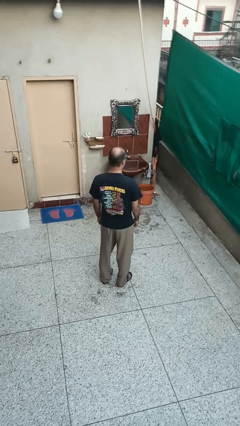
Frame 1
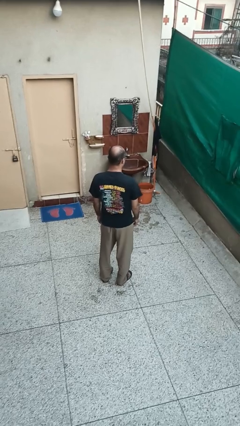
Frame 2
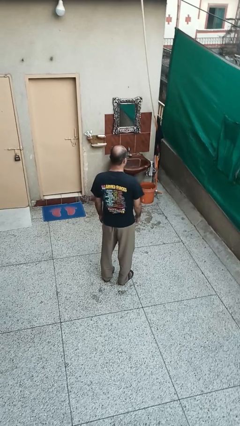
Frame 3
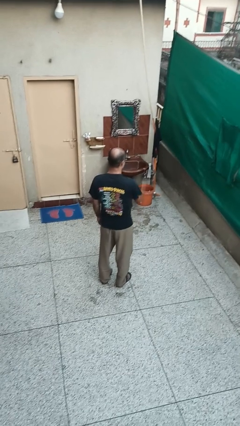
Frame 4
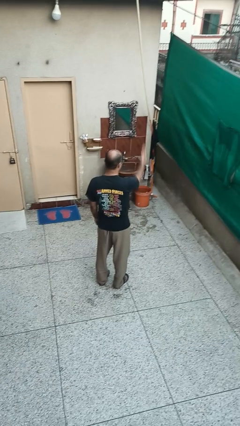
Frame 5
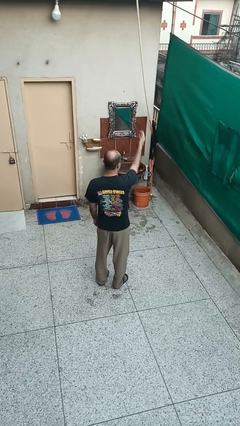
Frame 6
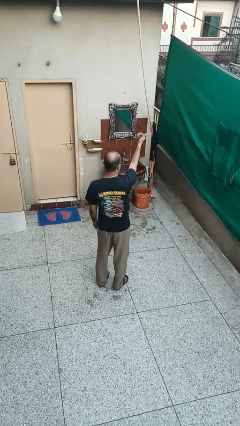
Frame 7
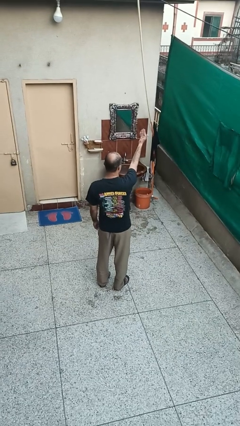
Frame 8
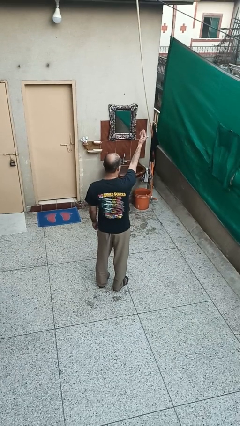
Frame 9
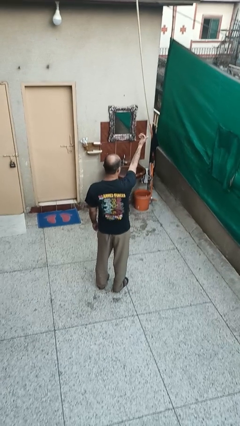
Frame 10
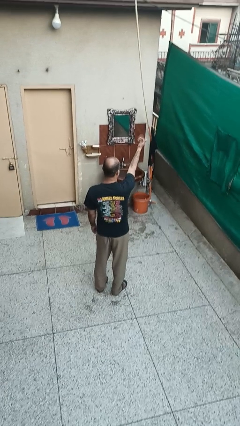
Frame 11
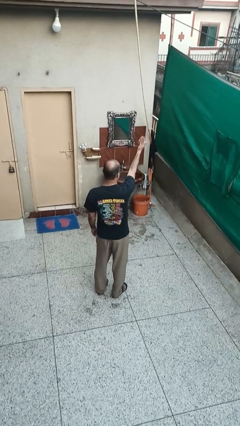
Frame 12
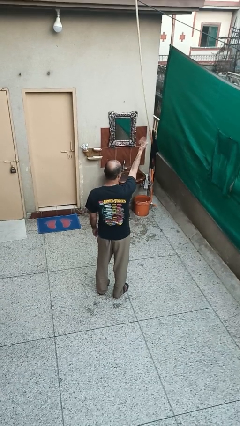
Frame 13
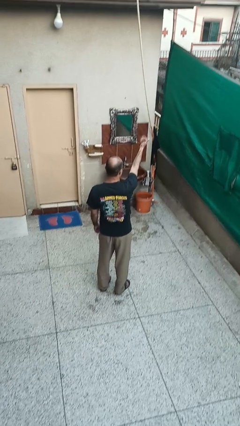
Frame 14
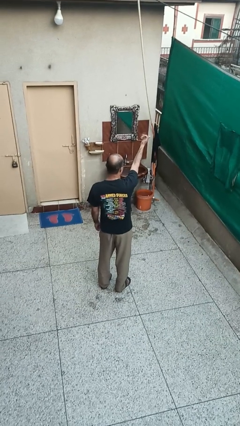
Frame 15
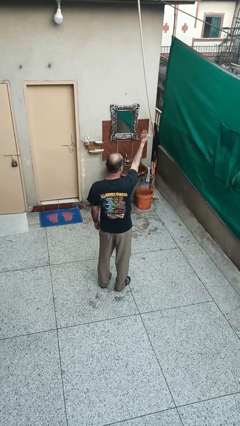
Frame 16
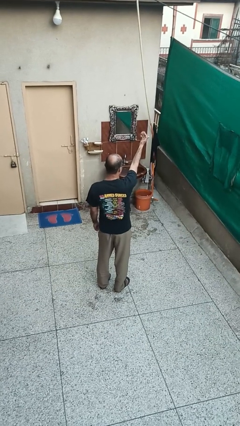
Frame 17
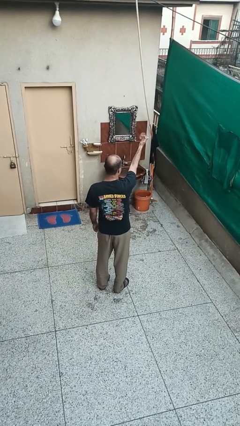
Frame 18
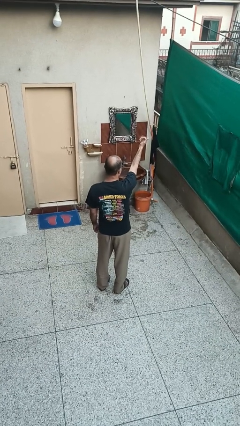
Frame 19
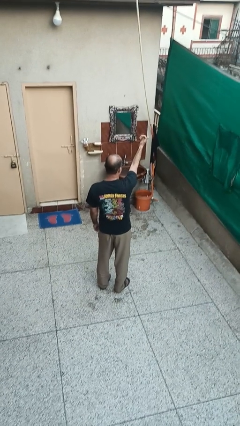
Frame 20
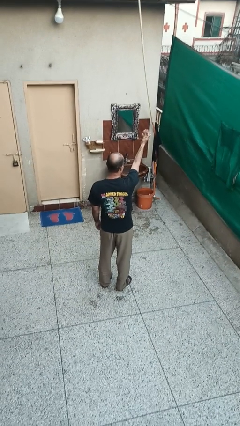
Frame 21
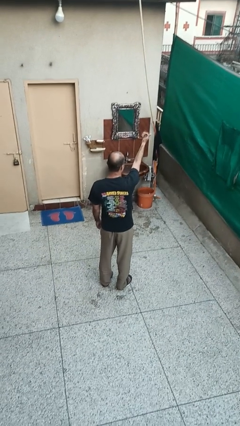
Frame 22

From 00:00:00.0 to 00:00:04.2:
person gestures come here

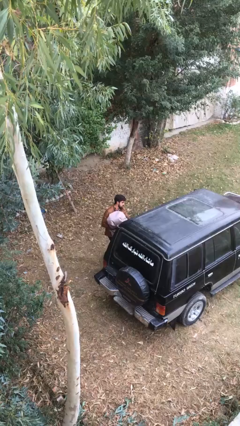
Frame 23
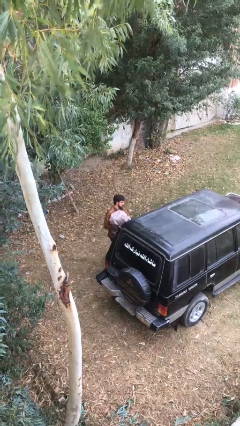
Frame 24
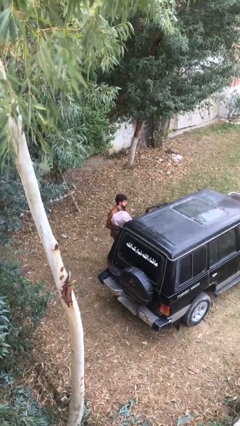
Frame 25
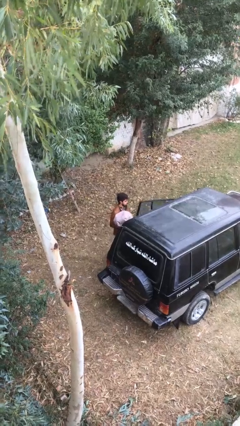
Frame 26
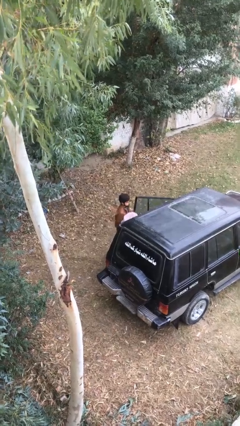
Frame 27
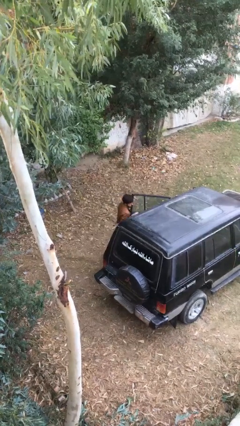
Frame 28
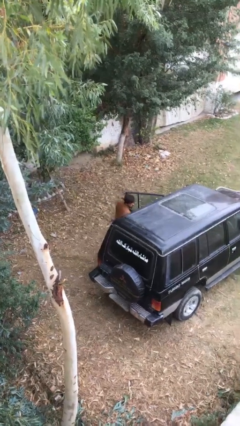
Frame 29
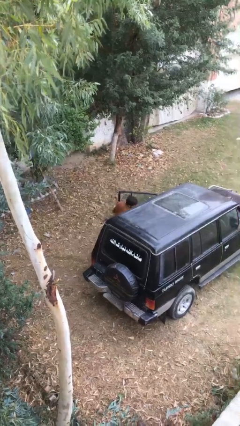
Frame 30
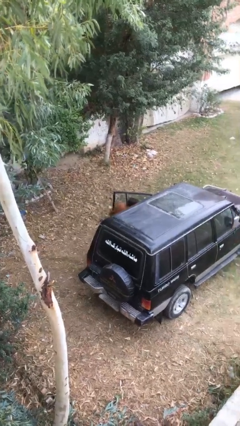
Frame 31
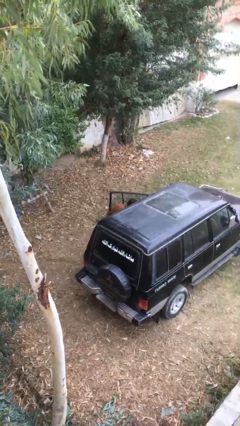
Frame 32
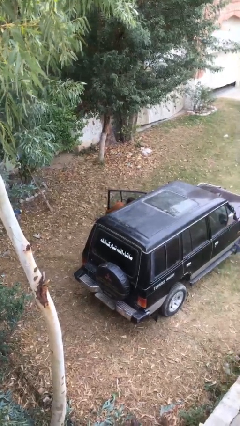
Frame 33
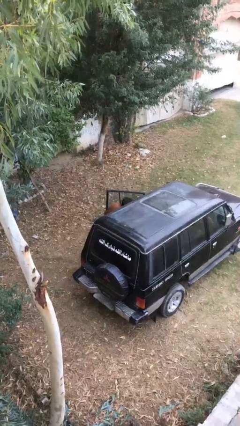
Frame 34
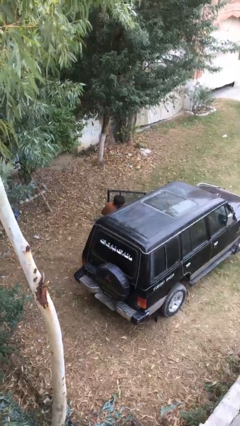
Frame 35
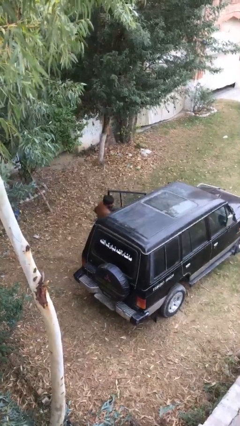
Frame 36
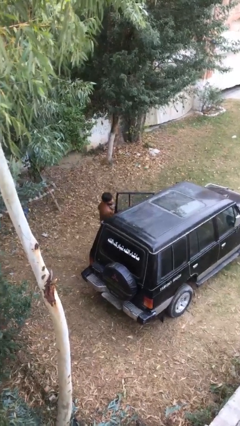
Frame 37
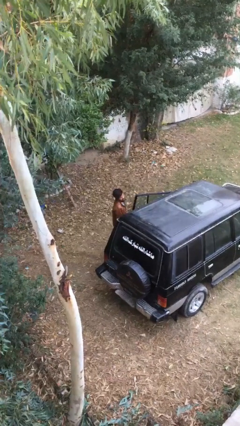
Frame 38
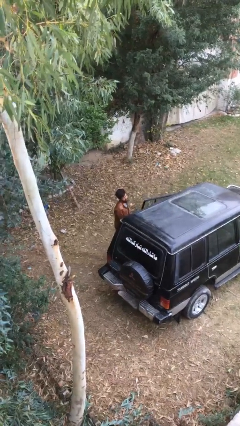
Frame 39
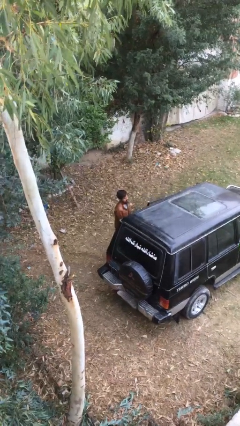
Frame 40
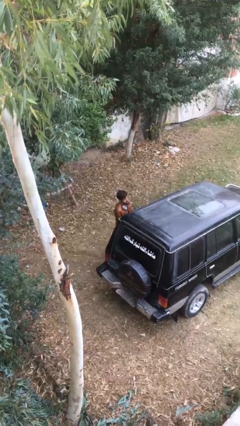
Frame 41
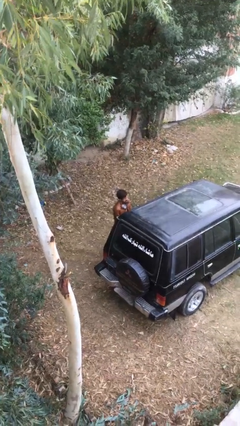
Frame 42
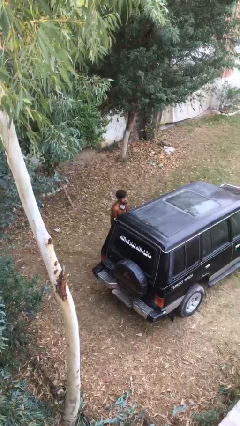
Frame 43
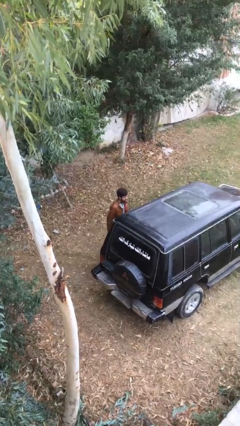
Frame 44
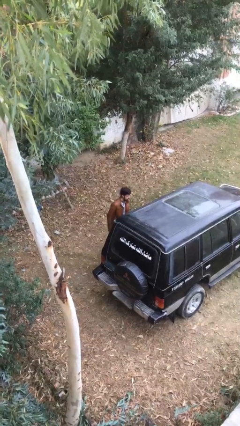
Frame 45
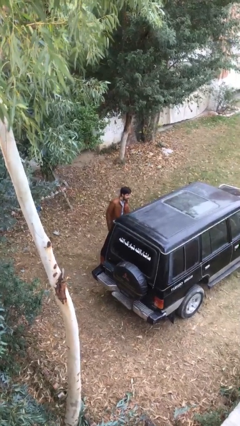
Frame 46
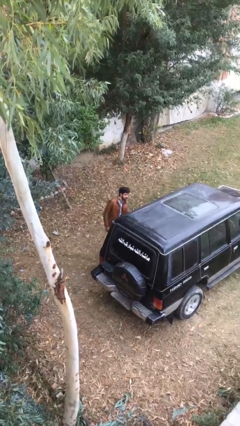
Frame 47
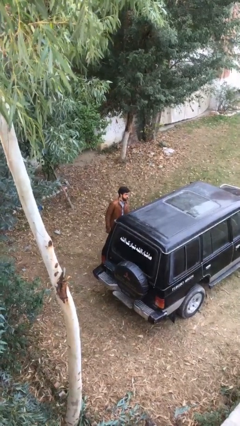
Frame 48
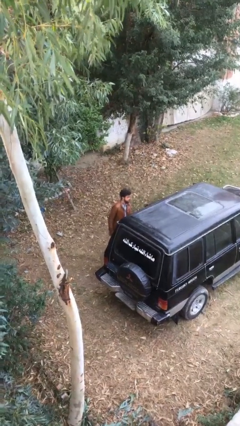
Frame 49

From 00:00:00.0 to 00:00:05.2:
person loads car

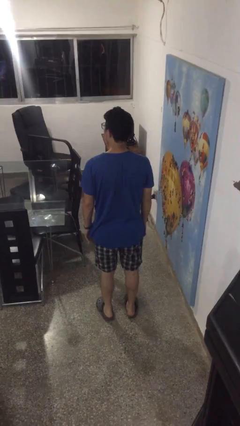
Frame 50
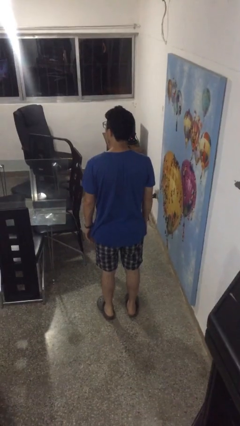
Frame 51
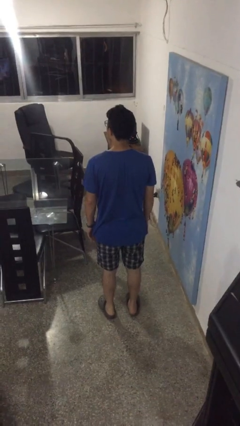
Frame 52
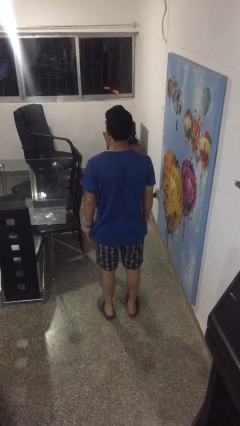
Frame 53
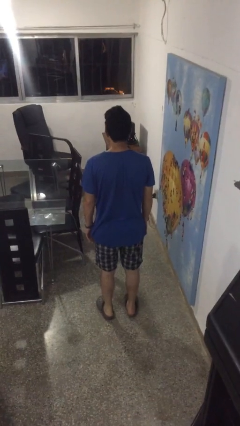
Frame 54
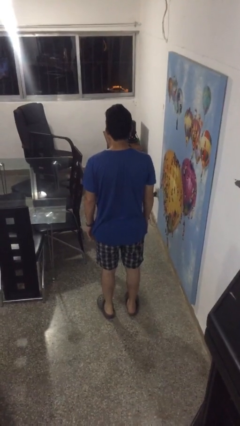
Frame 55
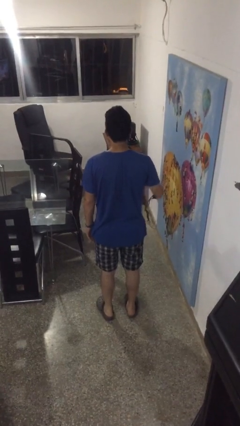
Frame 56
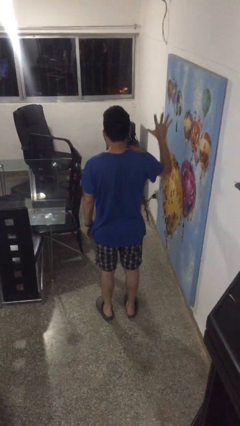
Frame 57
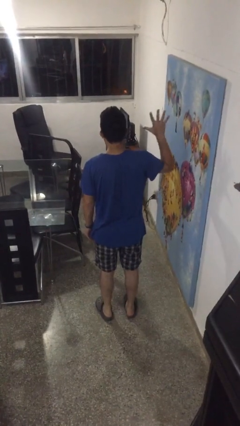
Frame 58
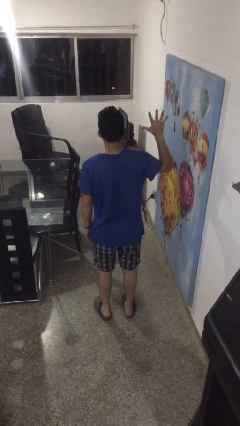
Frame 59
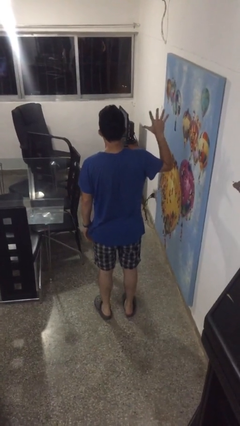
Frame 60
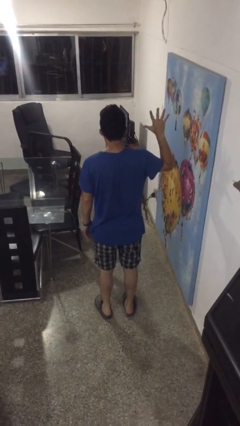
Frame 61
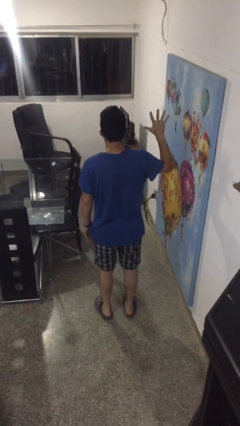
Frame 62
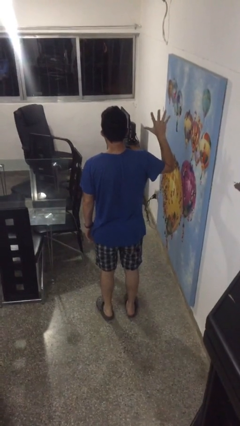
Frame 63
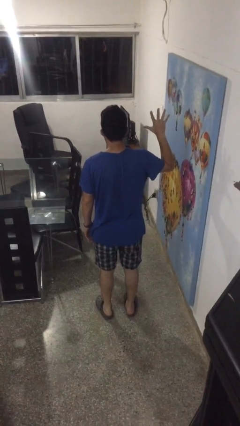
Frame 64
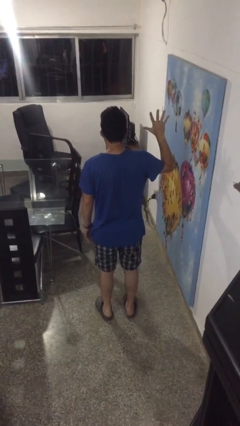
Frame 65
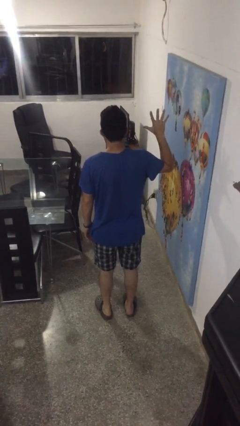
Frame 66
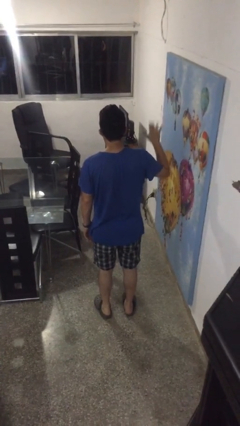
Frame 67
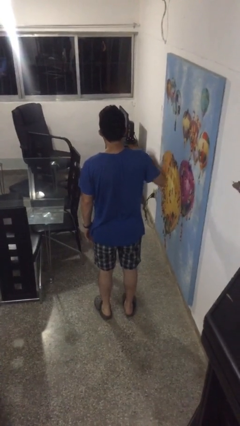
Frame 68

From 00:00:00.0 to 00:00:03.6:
person gestures number five

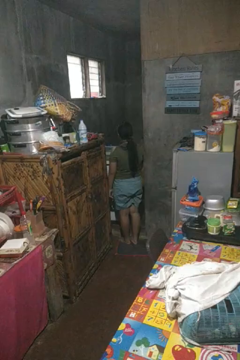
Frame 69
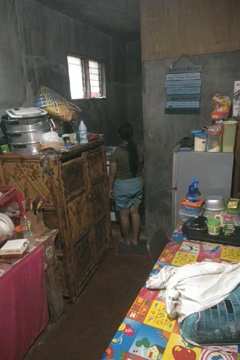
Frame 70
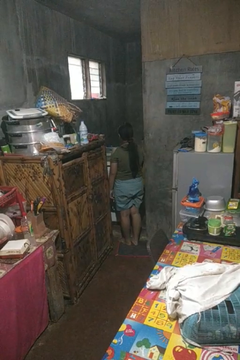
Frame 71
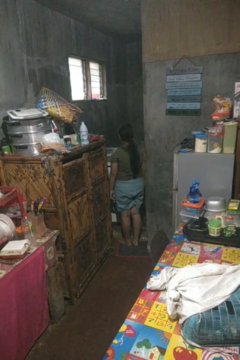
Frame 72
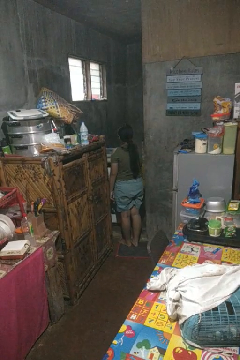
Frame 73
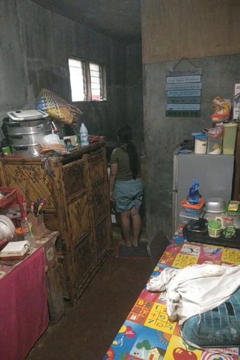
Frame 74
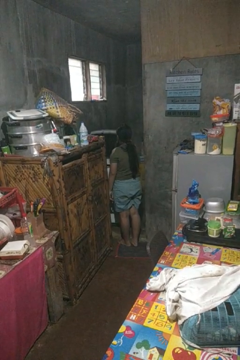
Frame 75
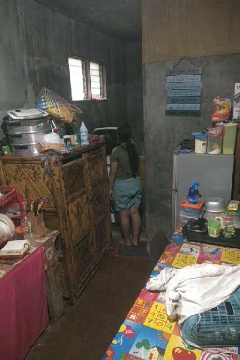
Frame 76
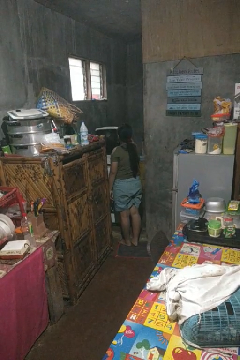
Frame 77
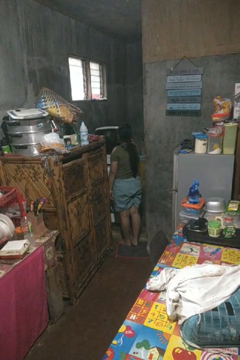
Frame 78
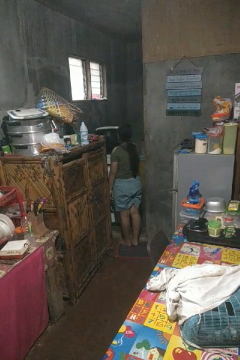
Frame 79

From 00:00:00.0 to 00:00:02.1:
person opens clothes washer

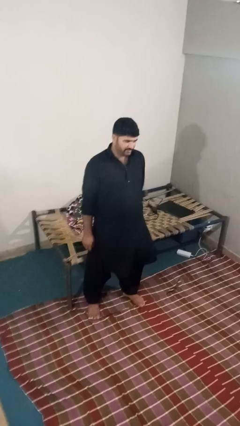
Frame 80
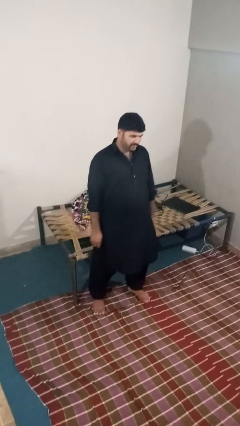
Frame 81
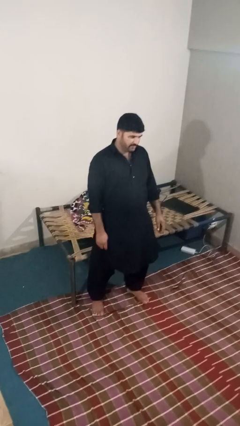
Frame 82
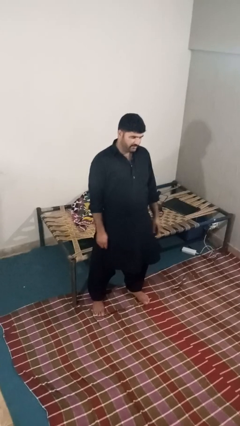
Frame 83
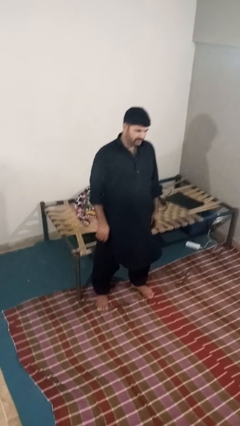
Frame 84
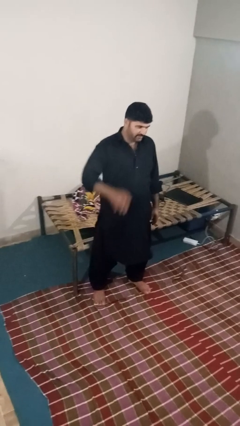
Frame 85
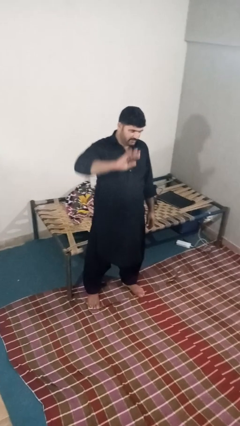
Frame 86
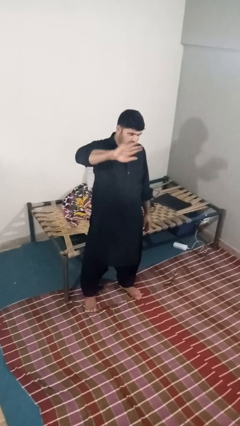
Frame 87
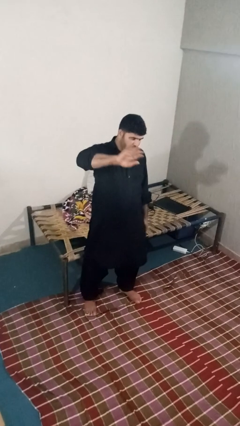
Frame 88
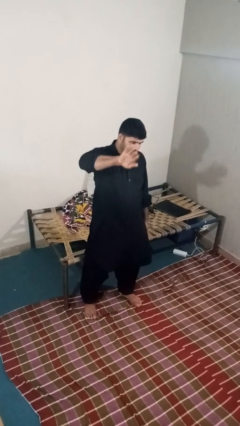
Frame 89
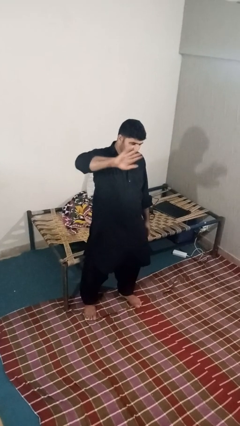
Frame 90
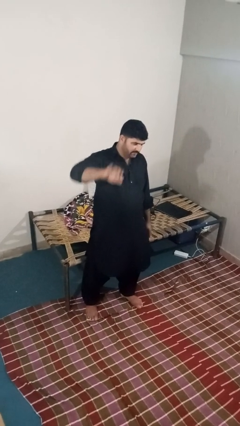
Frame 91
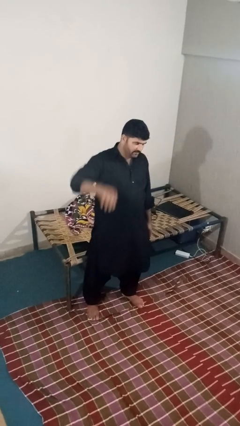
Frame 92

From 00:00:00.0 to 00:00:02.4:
person gestures swipe right

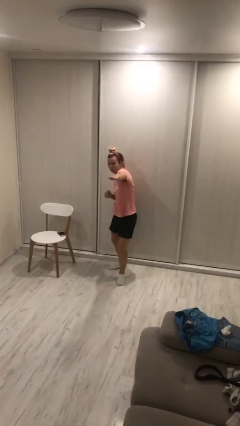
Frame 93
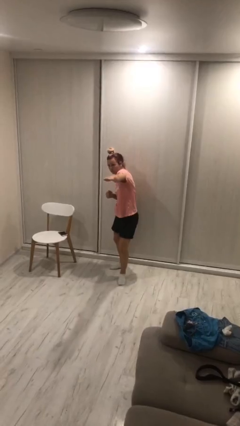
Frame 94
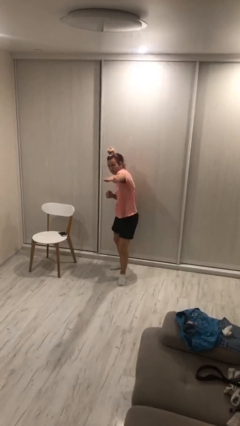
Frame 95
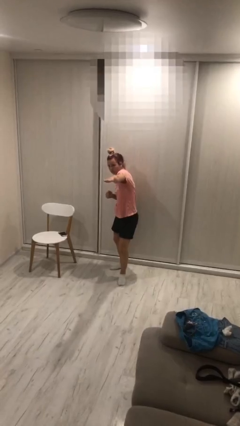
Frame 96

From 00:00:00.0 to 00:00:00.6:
person karate chop

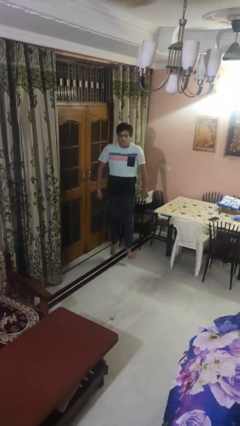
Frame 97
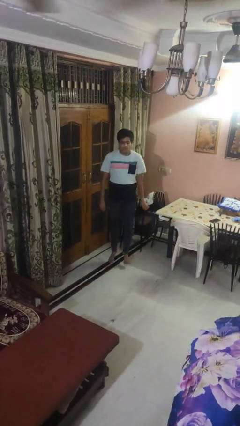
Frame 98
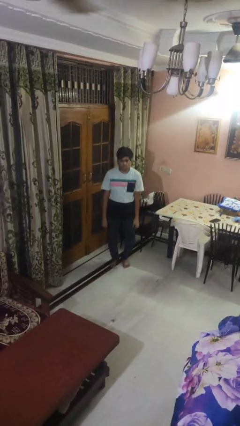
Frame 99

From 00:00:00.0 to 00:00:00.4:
person jumps
